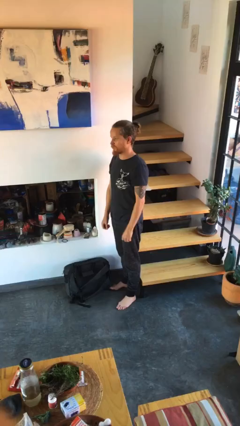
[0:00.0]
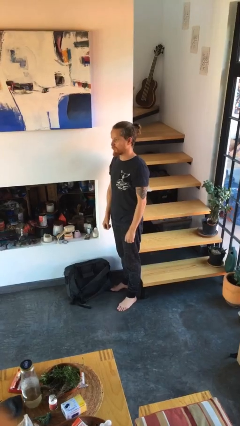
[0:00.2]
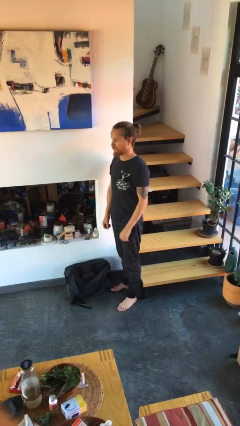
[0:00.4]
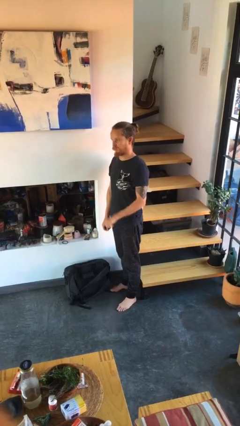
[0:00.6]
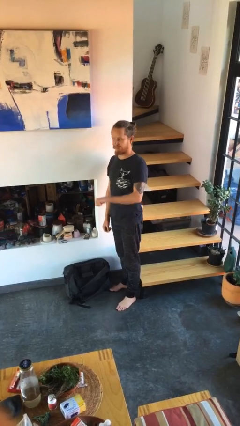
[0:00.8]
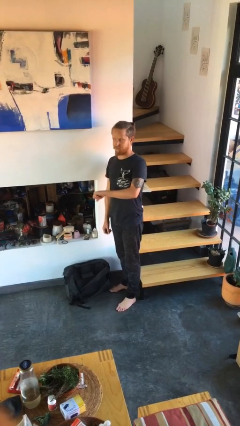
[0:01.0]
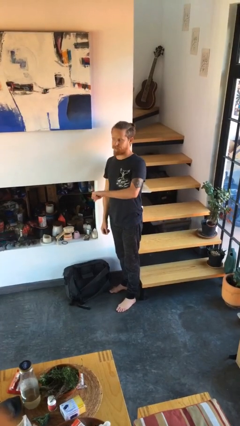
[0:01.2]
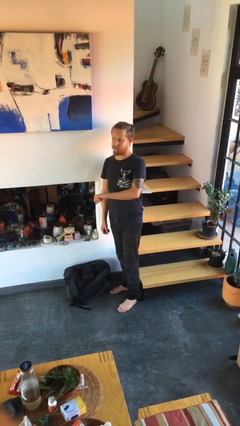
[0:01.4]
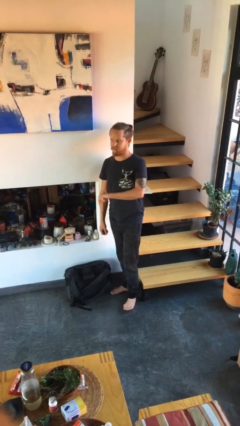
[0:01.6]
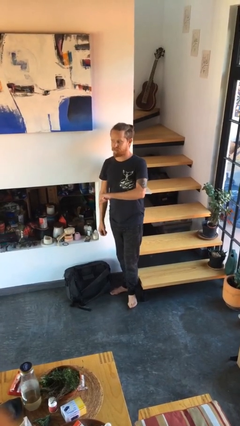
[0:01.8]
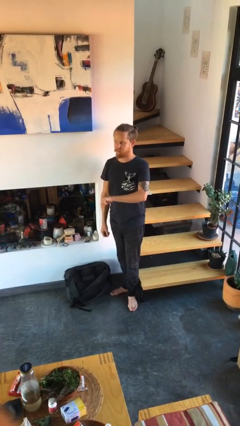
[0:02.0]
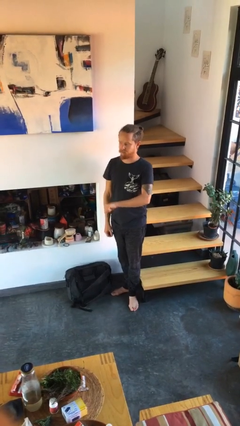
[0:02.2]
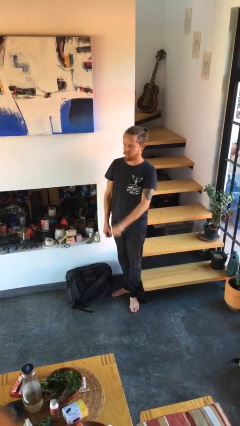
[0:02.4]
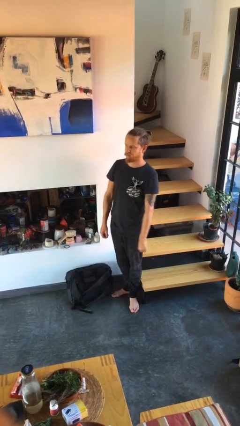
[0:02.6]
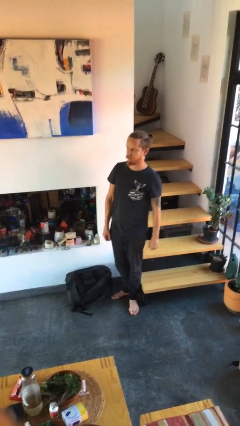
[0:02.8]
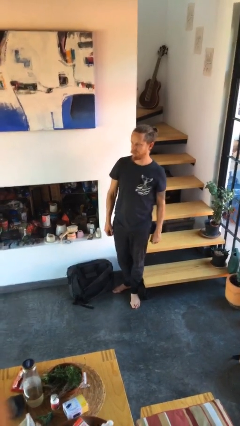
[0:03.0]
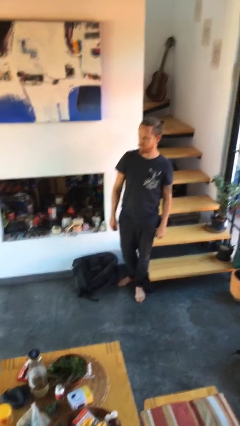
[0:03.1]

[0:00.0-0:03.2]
person gestures thumbs down

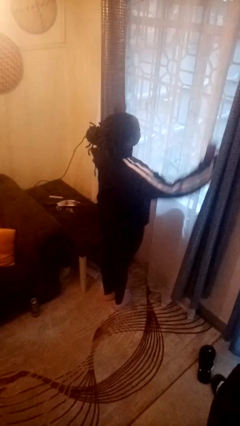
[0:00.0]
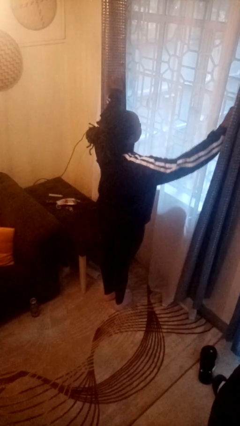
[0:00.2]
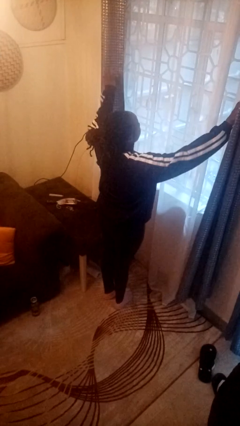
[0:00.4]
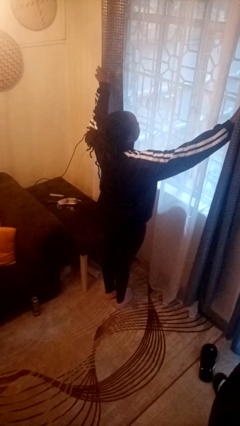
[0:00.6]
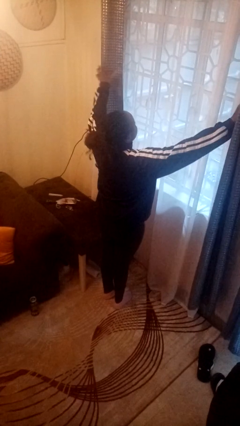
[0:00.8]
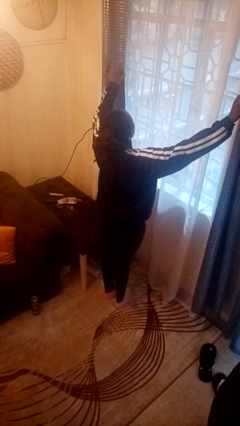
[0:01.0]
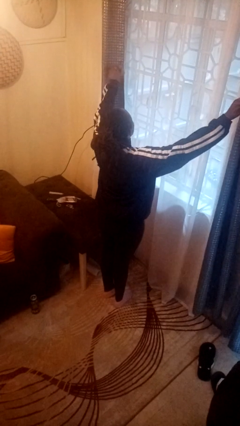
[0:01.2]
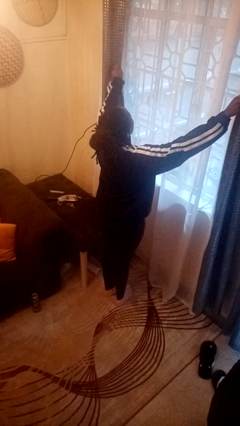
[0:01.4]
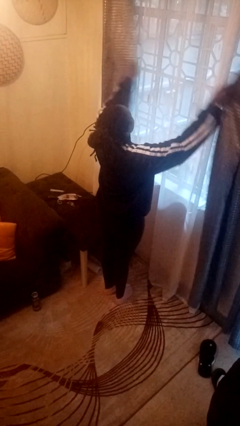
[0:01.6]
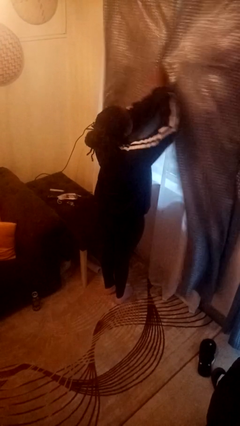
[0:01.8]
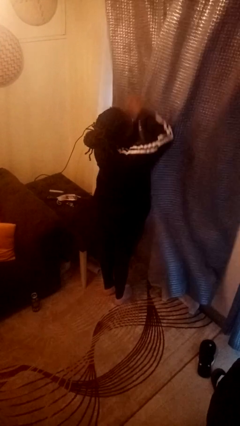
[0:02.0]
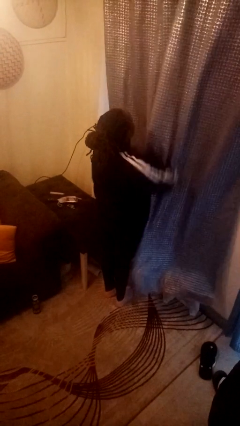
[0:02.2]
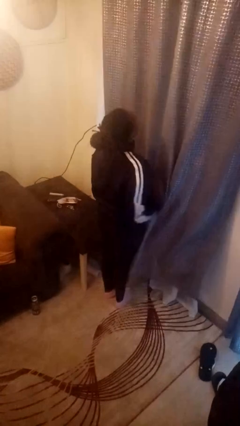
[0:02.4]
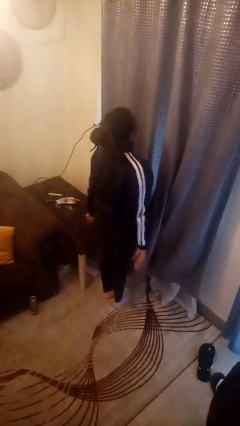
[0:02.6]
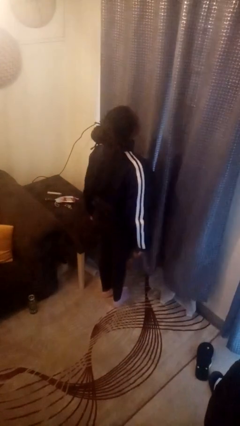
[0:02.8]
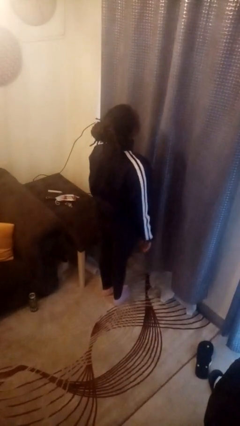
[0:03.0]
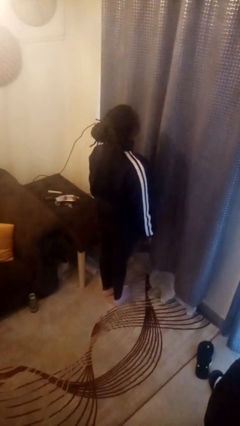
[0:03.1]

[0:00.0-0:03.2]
person closes curtains

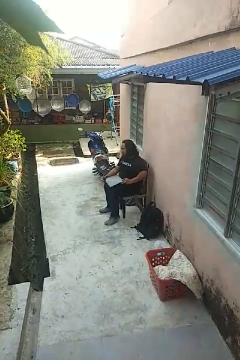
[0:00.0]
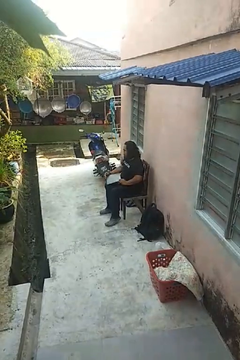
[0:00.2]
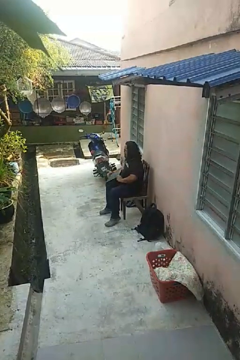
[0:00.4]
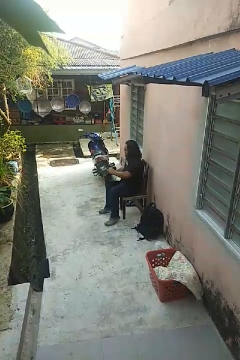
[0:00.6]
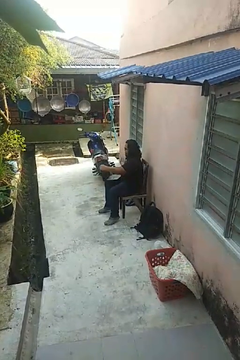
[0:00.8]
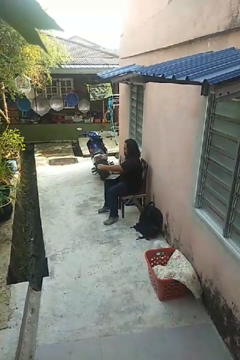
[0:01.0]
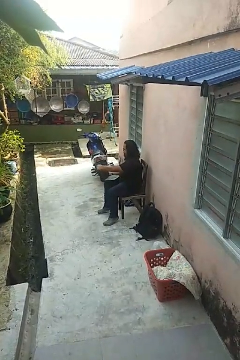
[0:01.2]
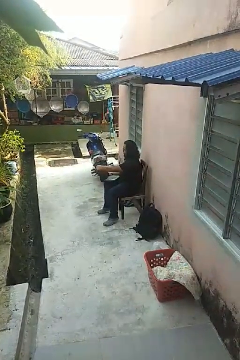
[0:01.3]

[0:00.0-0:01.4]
person opens laptop

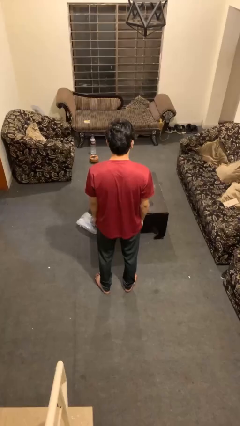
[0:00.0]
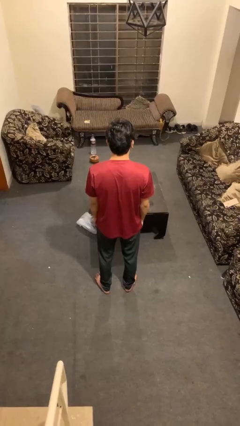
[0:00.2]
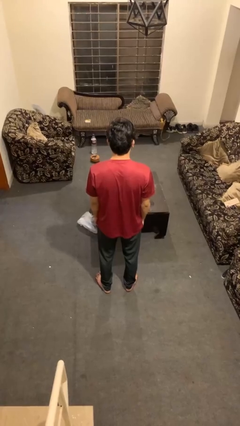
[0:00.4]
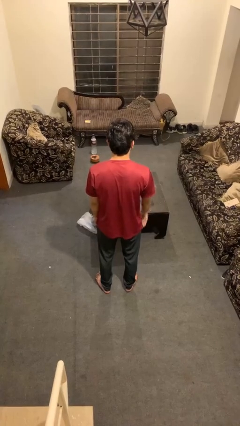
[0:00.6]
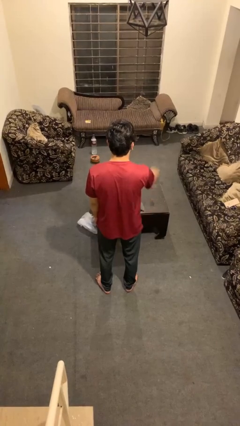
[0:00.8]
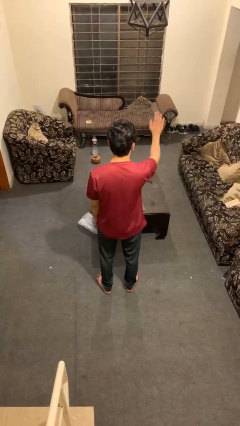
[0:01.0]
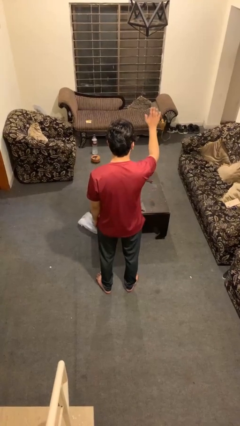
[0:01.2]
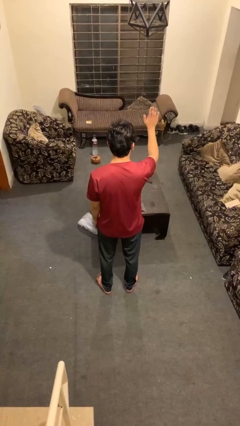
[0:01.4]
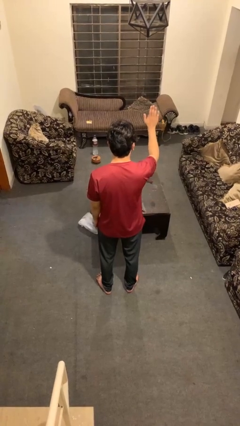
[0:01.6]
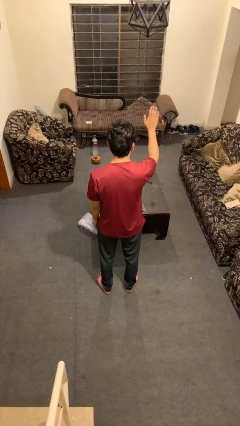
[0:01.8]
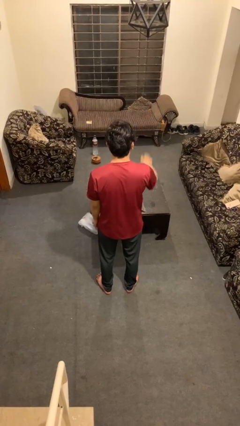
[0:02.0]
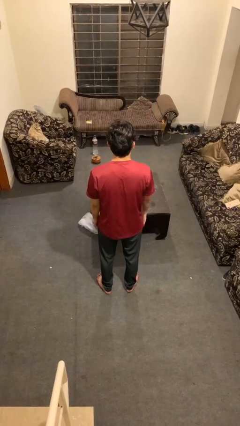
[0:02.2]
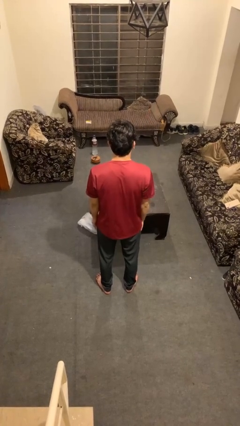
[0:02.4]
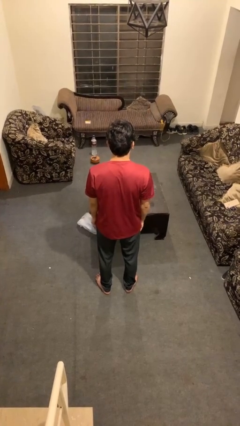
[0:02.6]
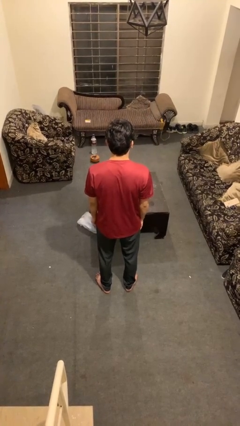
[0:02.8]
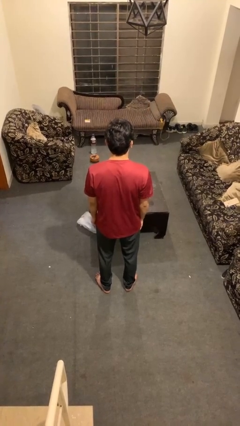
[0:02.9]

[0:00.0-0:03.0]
person gestures stop

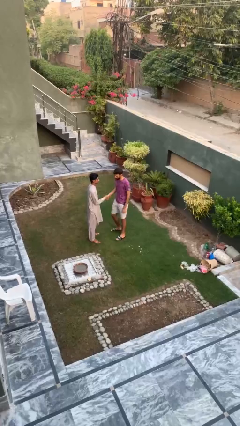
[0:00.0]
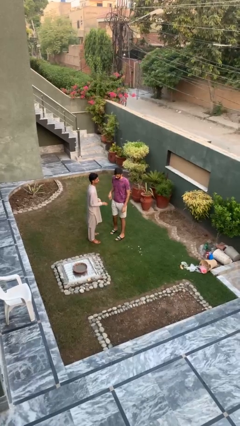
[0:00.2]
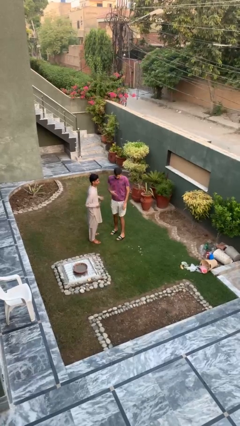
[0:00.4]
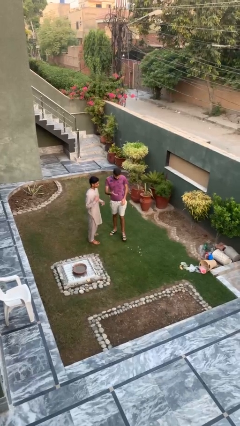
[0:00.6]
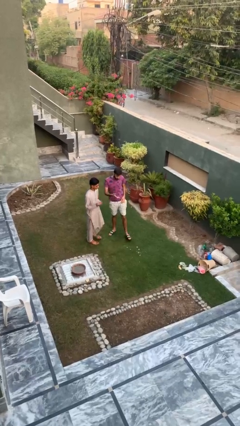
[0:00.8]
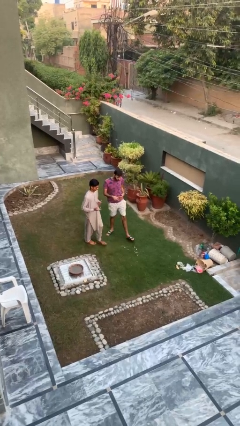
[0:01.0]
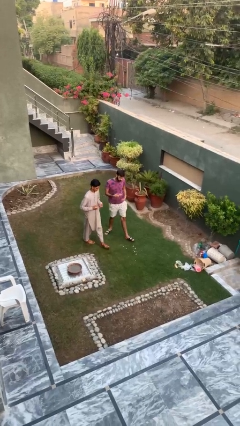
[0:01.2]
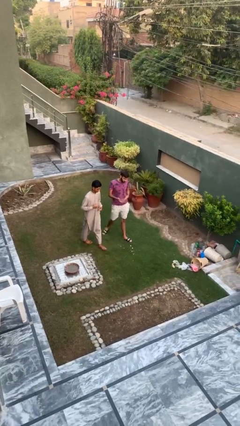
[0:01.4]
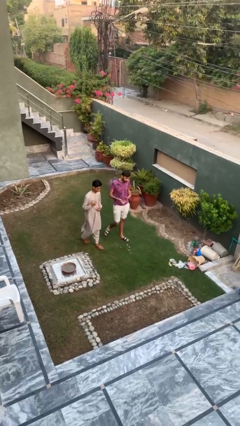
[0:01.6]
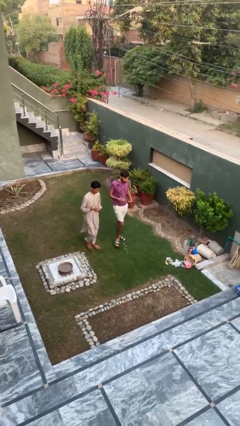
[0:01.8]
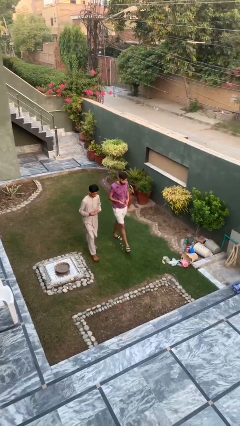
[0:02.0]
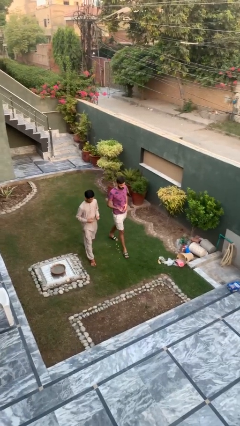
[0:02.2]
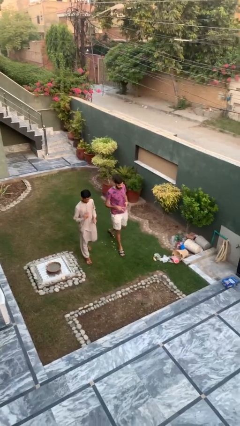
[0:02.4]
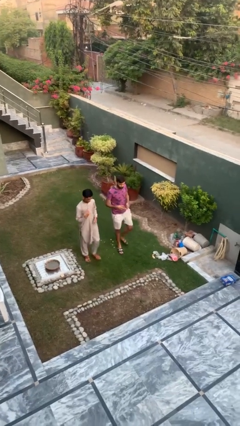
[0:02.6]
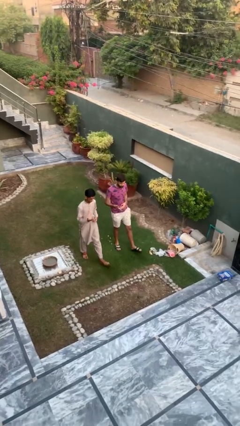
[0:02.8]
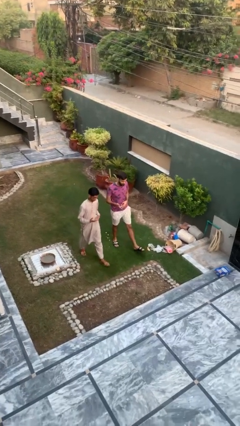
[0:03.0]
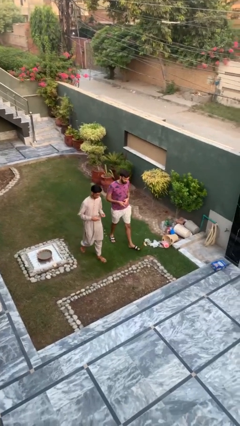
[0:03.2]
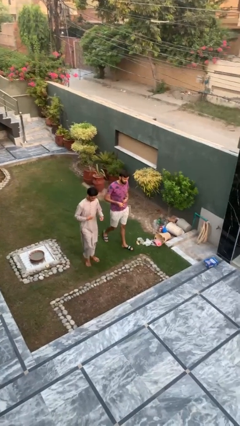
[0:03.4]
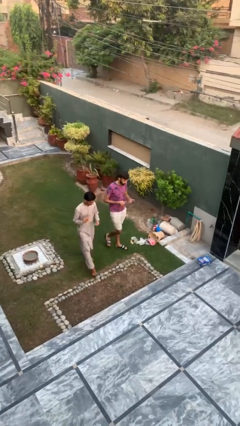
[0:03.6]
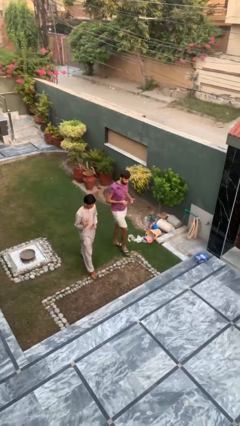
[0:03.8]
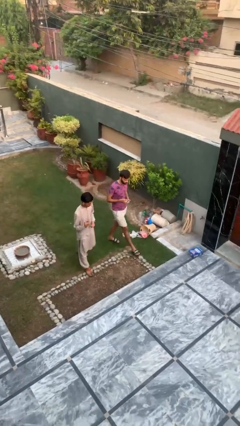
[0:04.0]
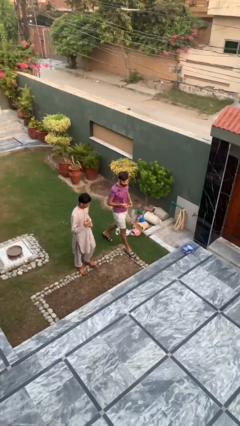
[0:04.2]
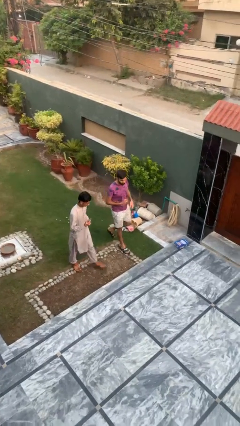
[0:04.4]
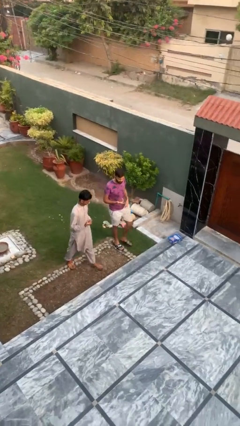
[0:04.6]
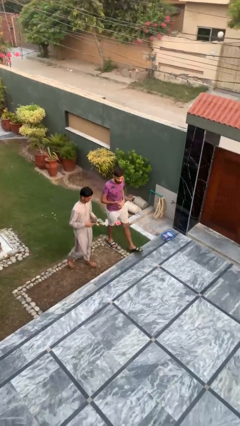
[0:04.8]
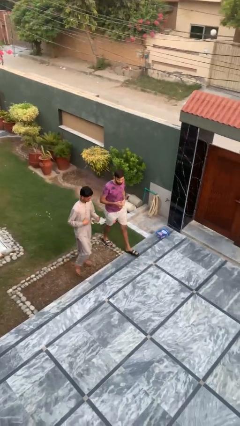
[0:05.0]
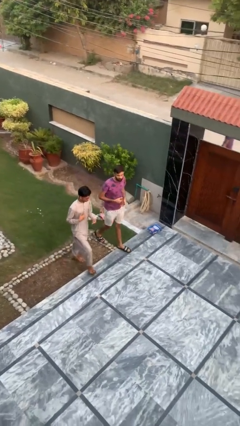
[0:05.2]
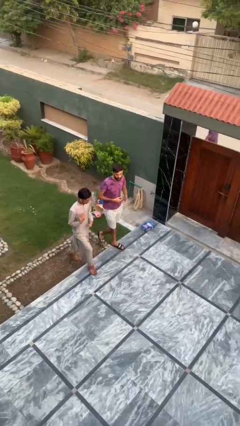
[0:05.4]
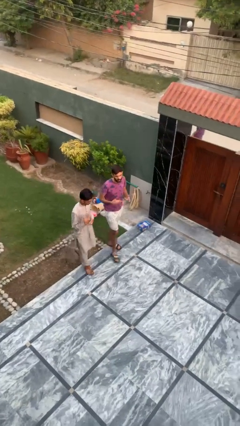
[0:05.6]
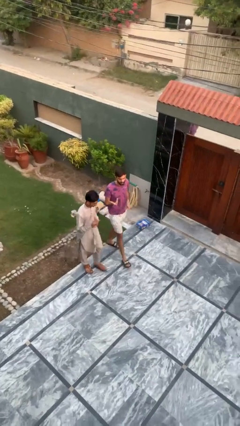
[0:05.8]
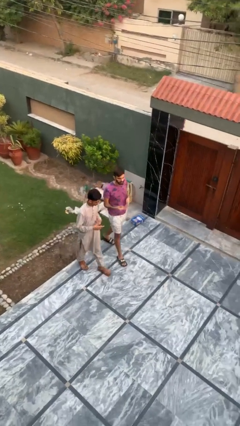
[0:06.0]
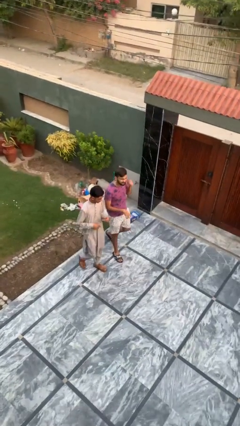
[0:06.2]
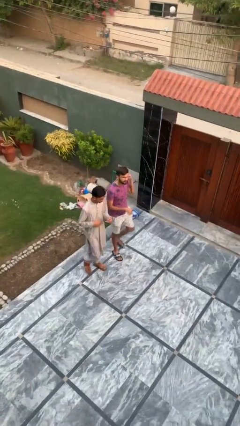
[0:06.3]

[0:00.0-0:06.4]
person talks to person

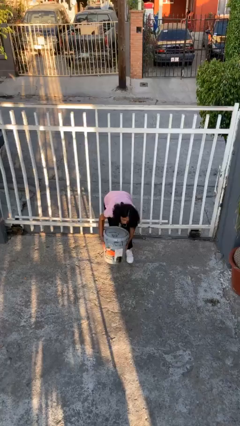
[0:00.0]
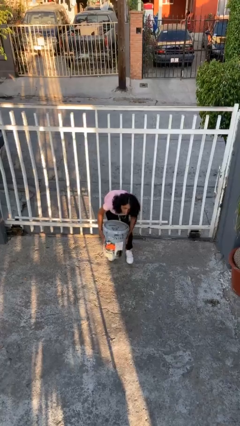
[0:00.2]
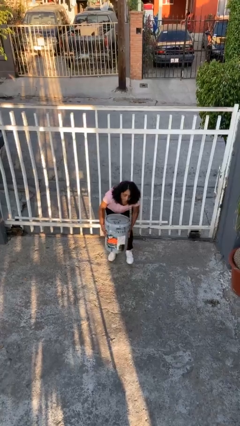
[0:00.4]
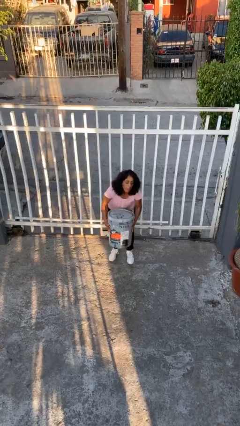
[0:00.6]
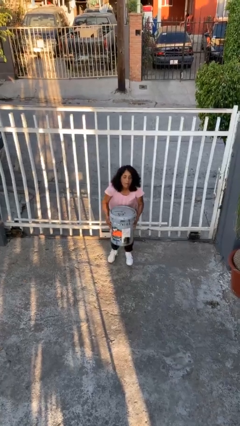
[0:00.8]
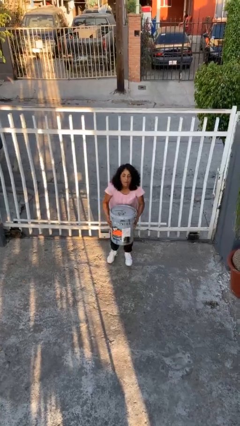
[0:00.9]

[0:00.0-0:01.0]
person picks up object from floor
